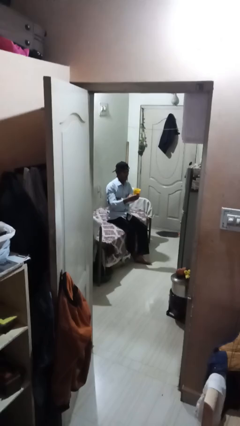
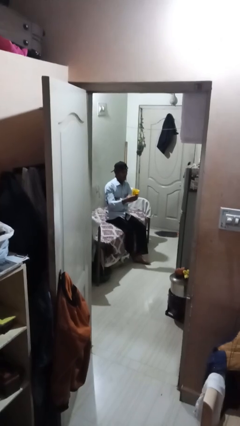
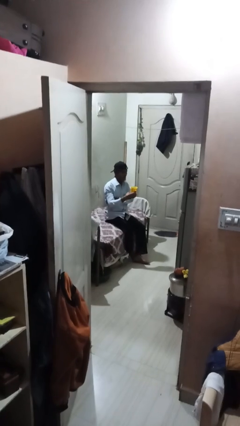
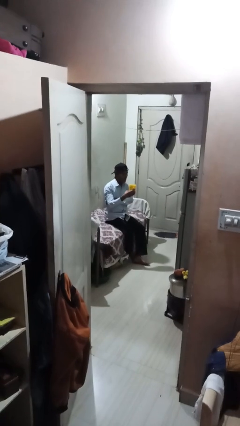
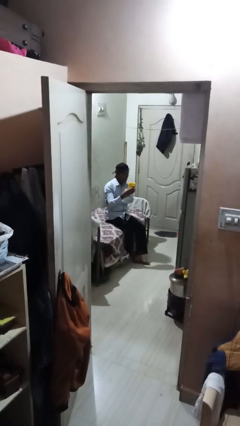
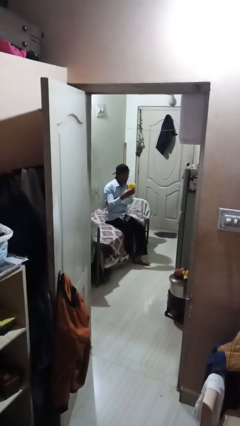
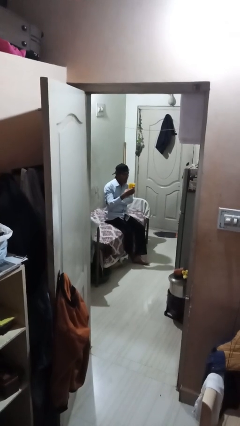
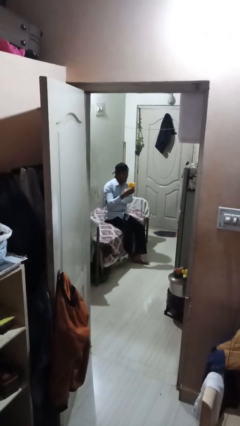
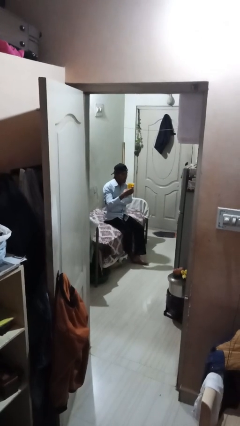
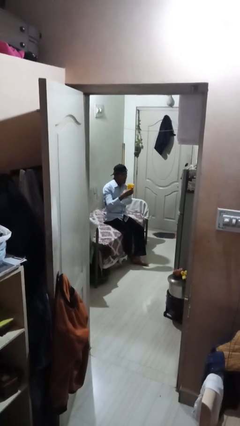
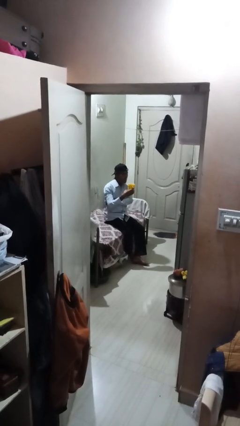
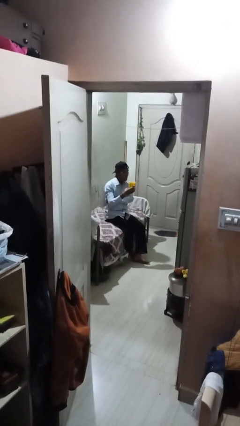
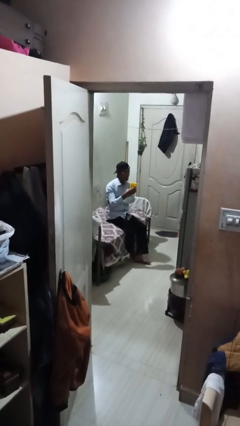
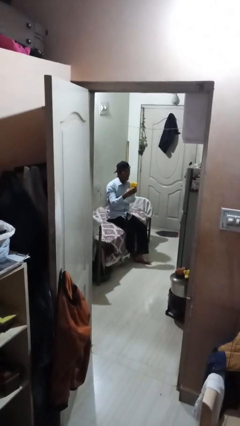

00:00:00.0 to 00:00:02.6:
person drinks from straw

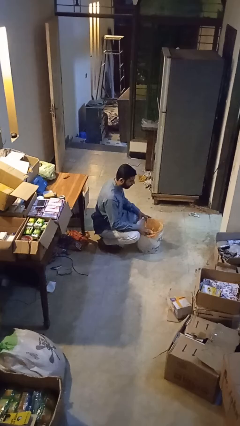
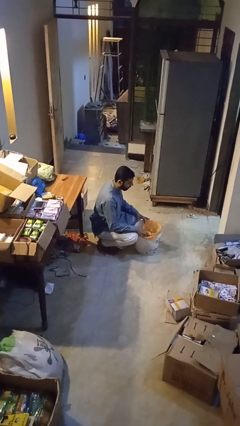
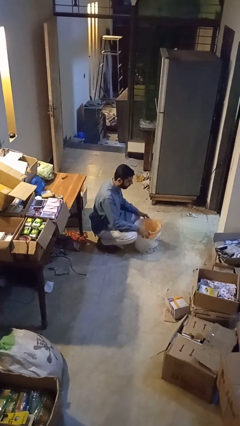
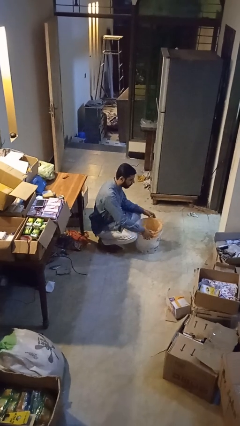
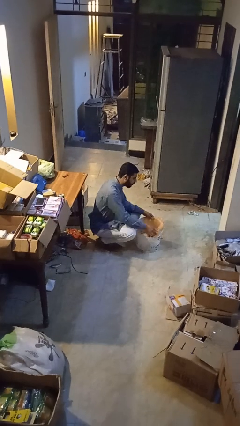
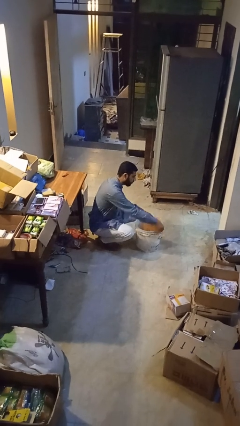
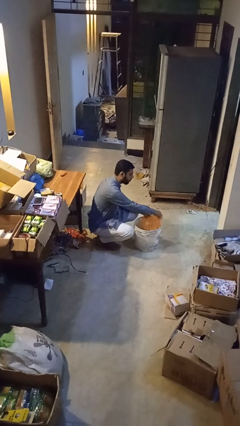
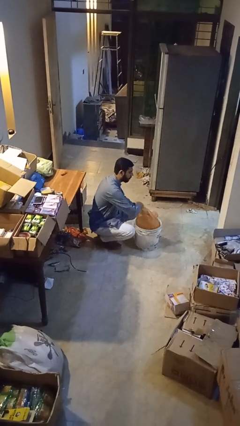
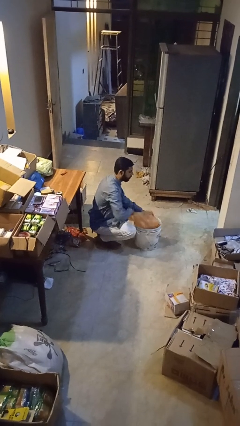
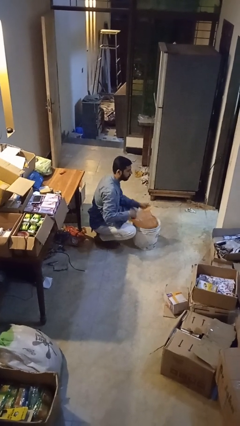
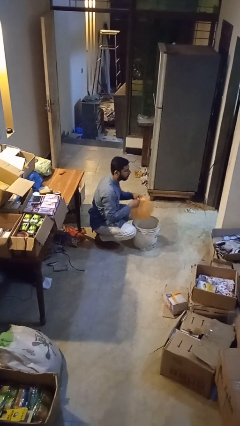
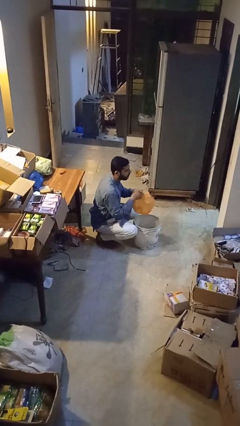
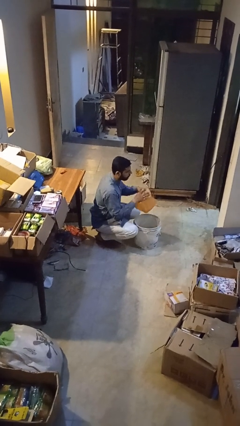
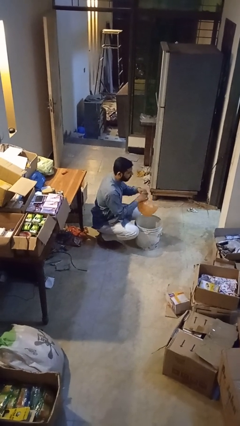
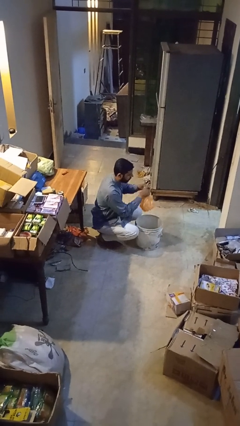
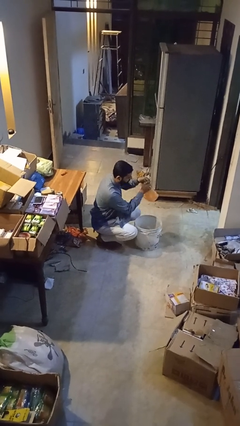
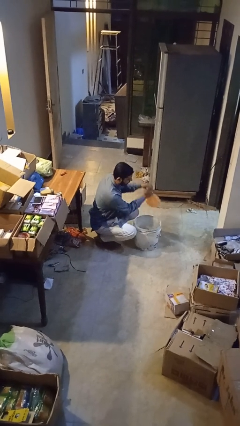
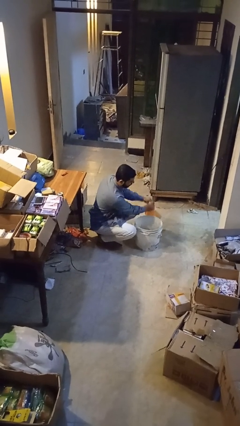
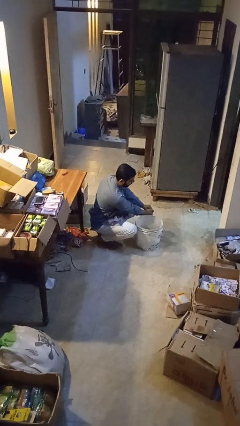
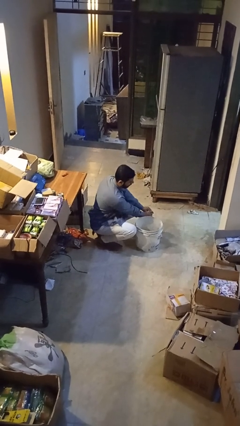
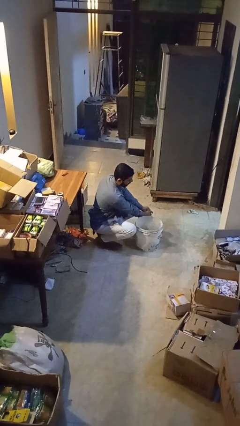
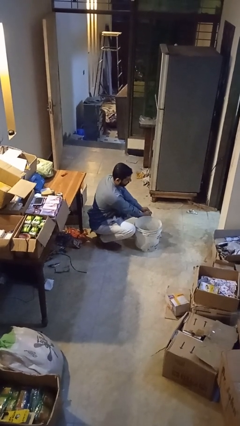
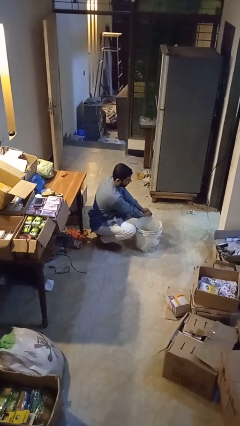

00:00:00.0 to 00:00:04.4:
person removes trashbag from trashcan

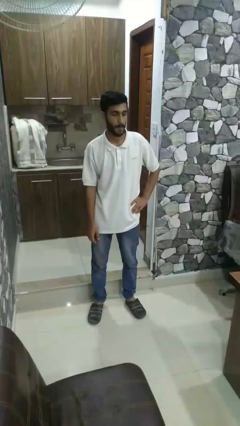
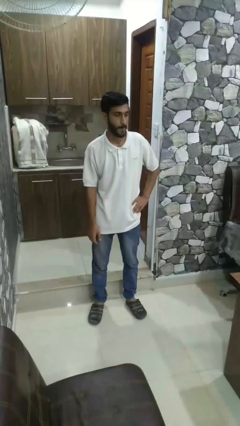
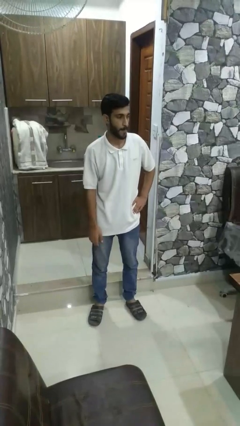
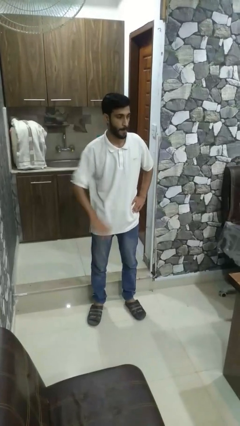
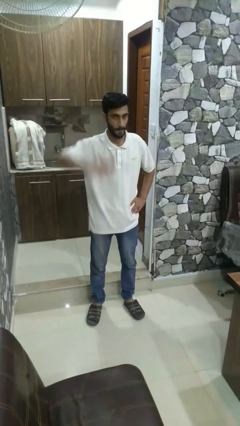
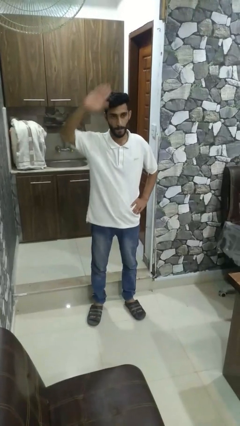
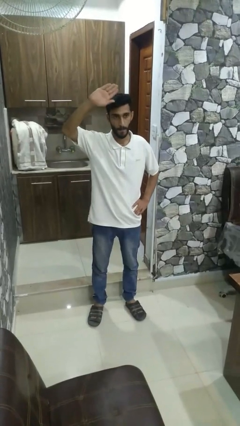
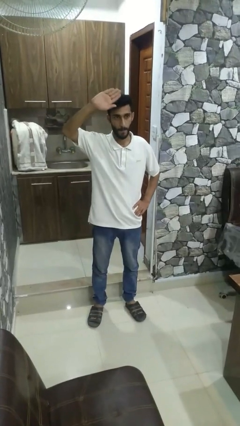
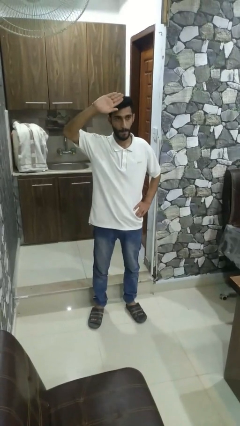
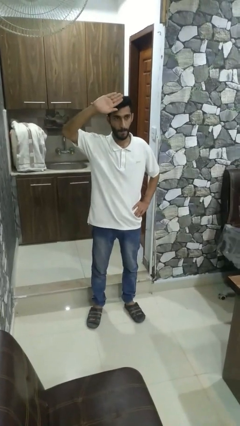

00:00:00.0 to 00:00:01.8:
person gestures swipe up

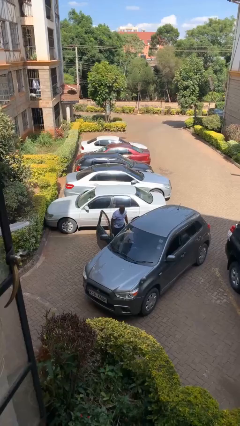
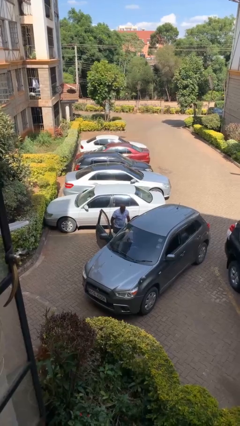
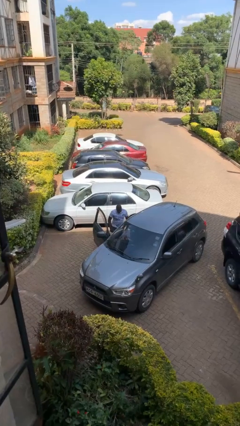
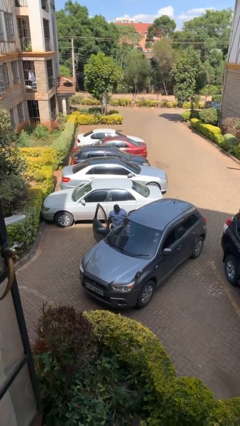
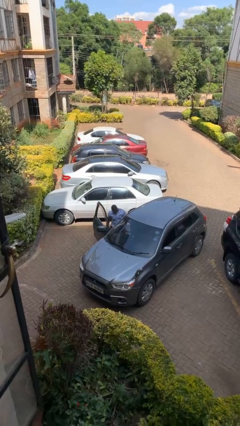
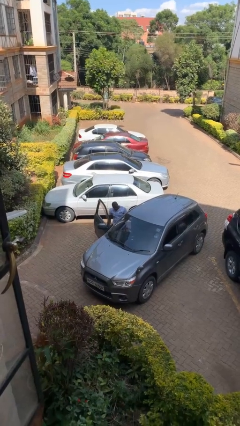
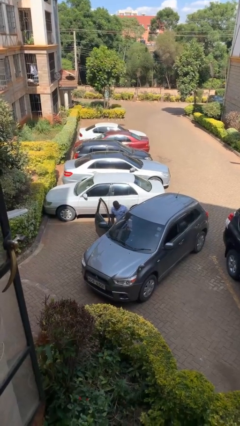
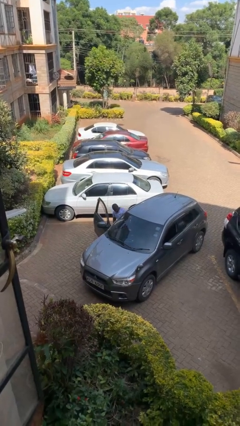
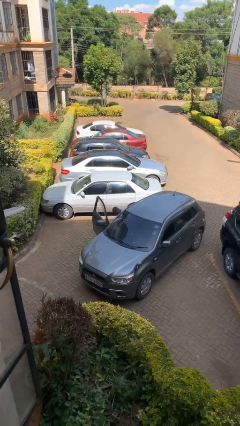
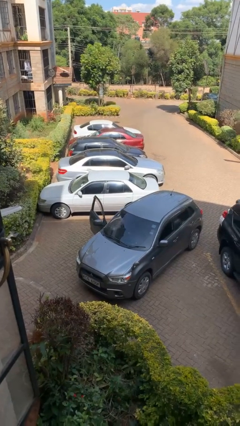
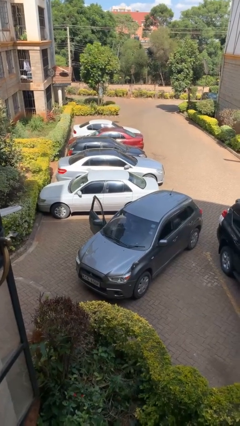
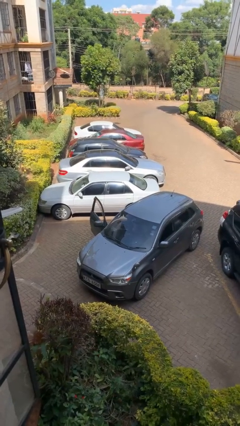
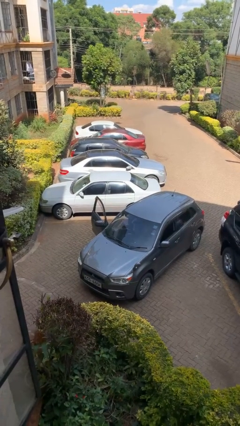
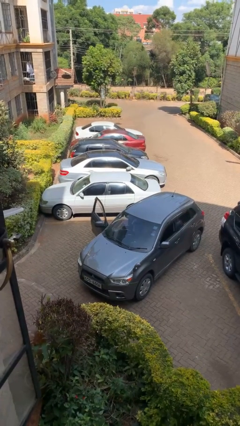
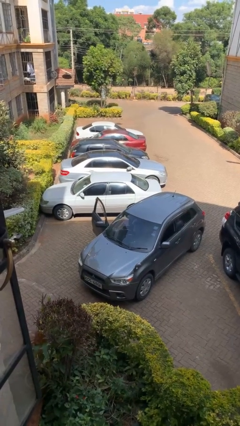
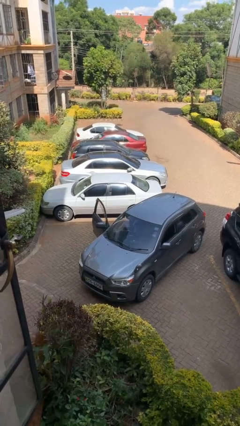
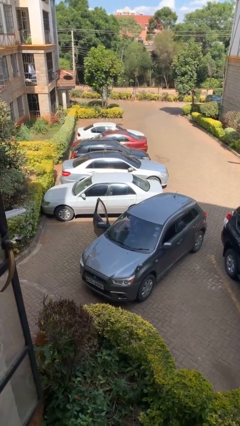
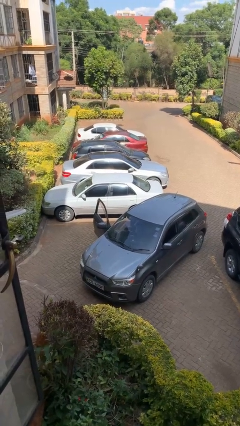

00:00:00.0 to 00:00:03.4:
person enters car

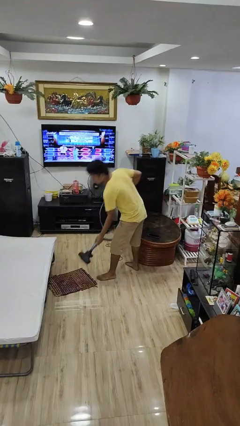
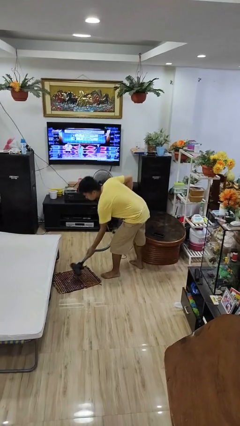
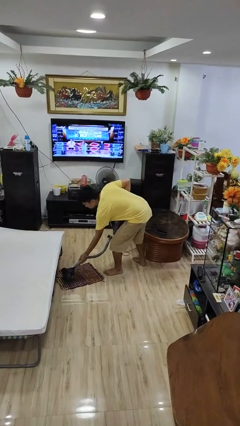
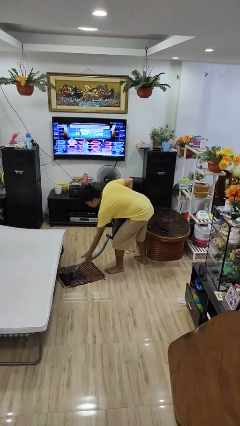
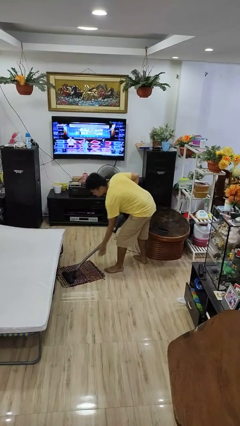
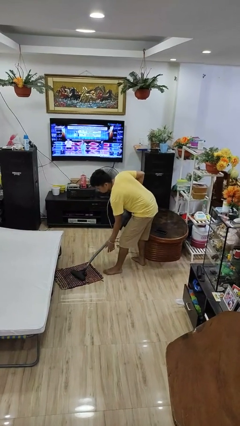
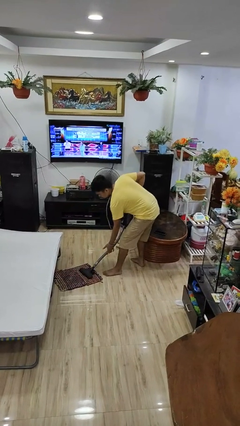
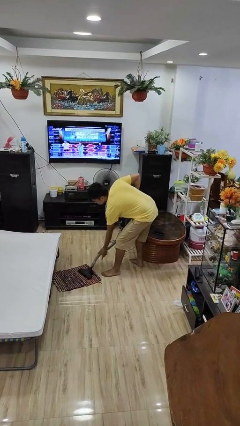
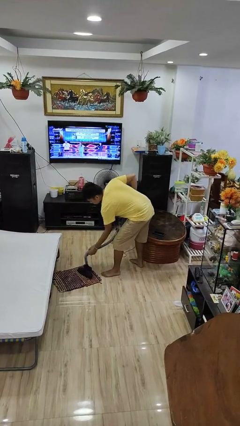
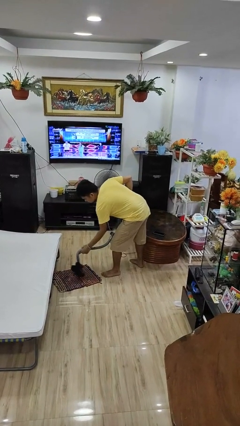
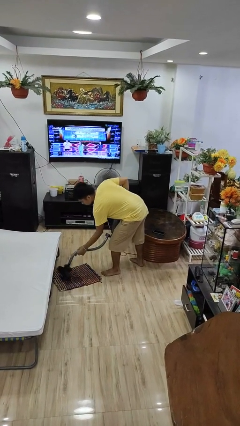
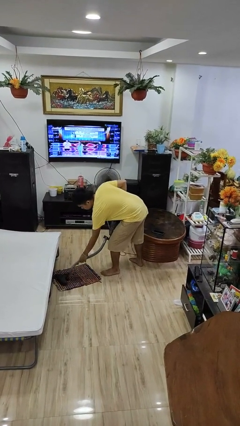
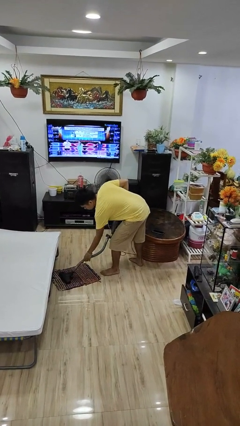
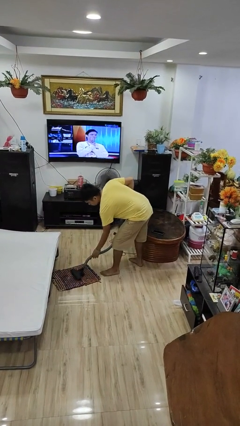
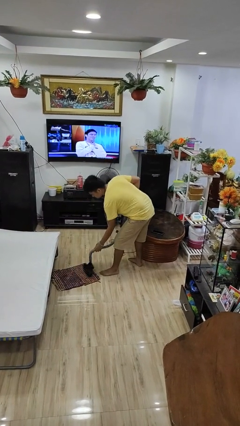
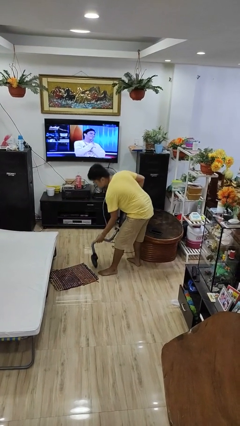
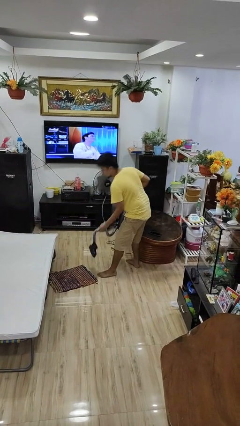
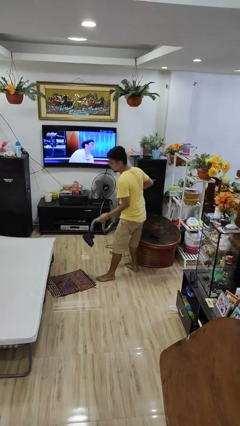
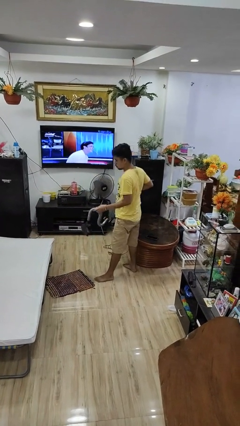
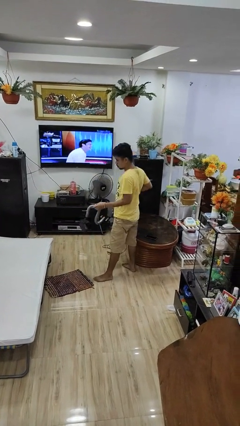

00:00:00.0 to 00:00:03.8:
person vacuums carpet

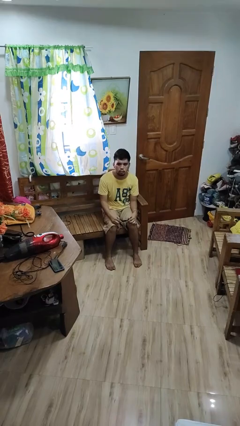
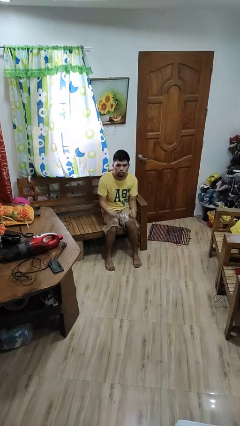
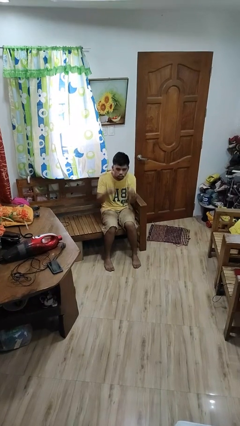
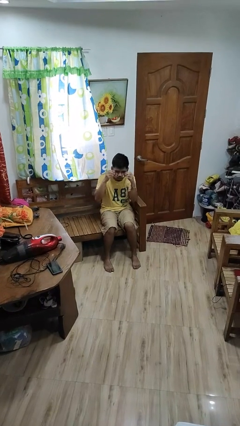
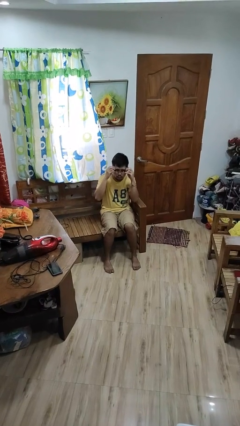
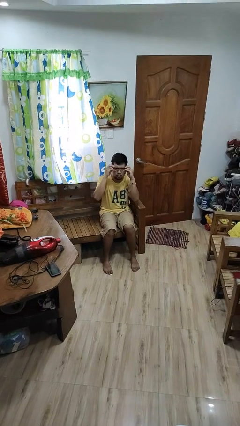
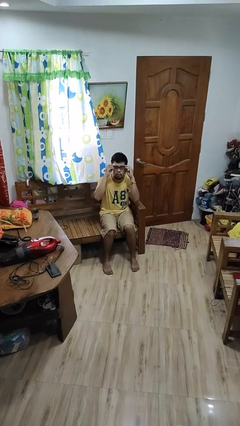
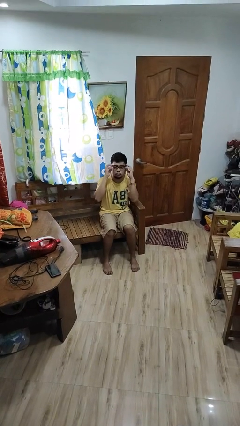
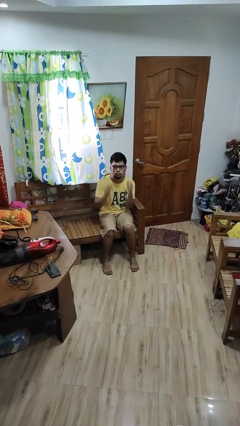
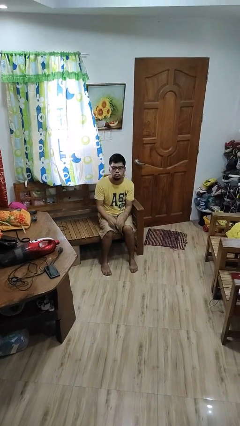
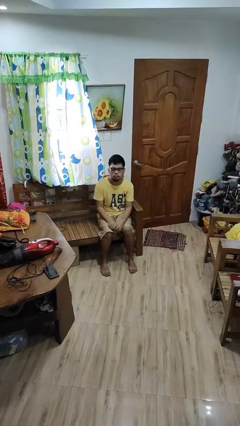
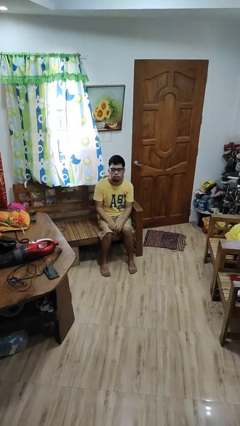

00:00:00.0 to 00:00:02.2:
person puts on glasses
